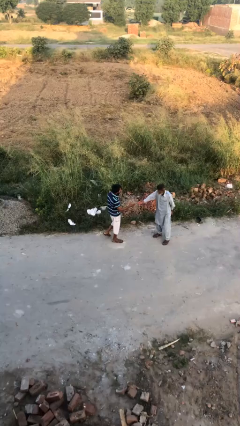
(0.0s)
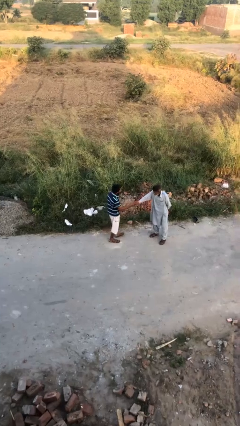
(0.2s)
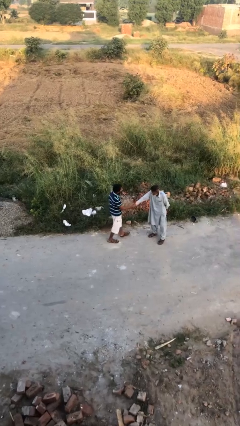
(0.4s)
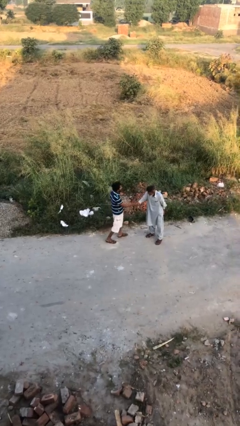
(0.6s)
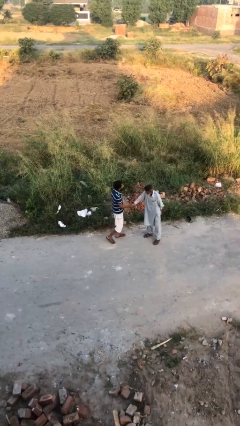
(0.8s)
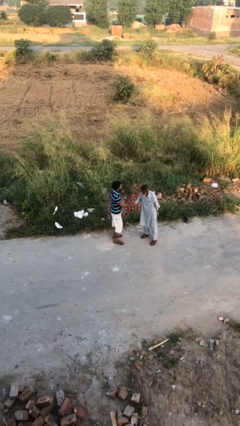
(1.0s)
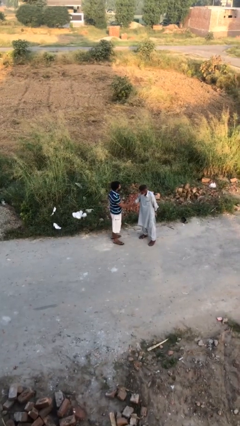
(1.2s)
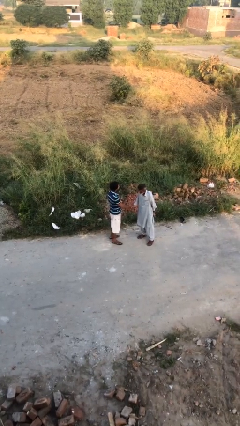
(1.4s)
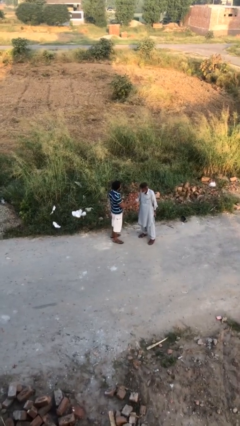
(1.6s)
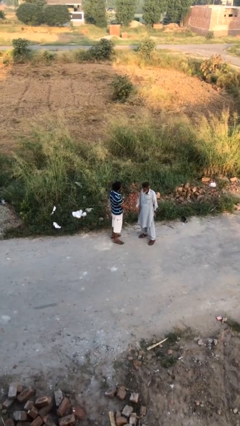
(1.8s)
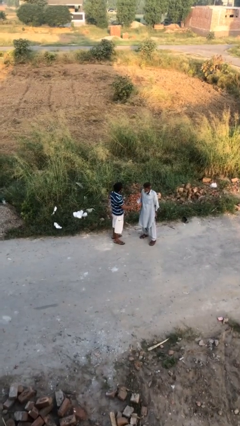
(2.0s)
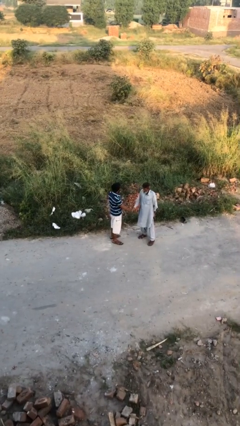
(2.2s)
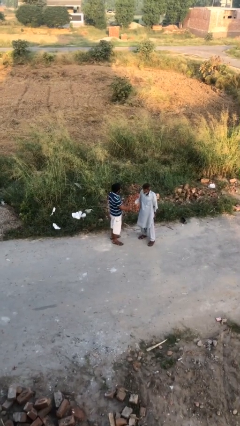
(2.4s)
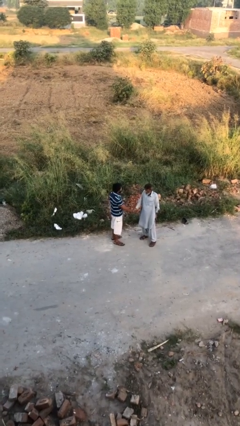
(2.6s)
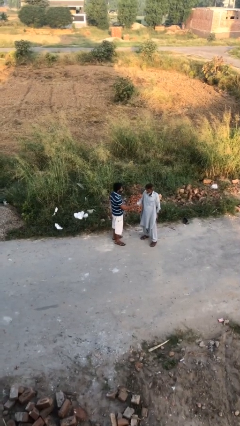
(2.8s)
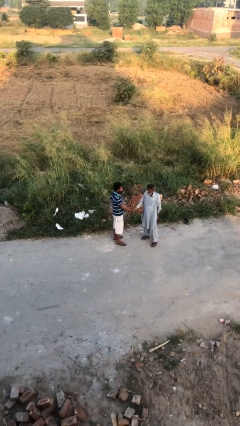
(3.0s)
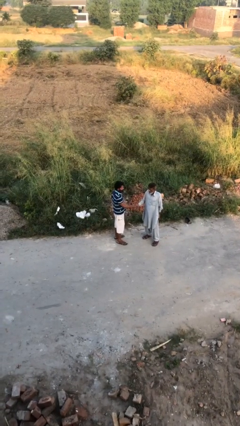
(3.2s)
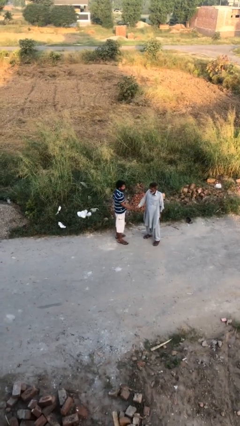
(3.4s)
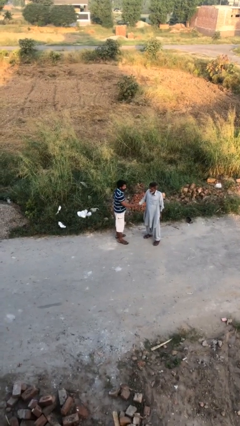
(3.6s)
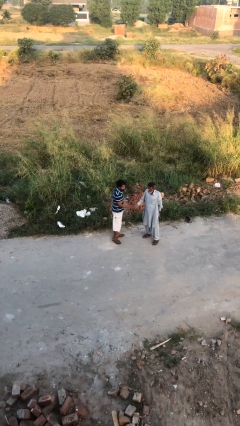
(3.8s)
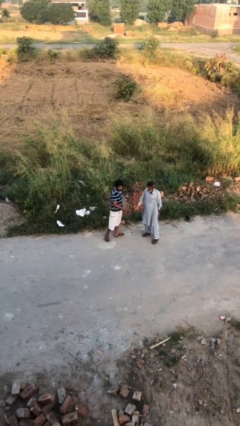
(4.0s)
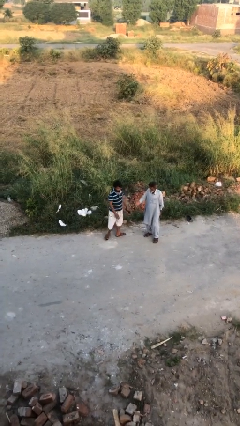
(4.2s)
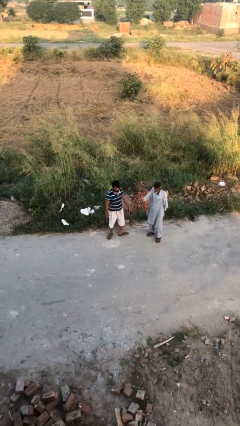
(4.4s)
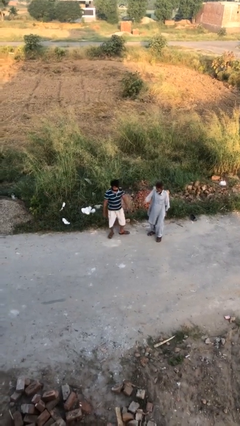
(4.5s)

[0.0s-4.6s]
person shakes hand

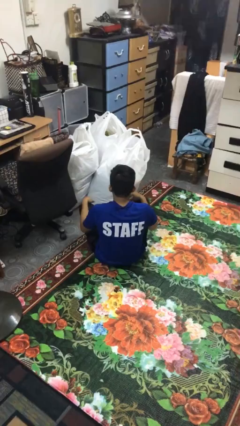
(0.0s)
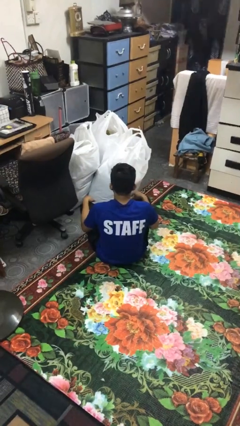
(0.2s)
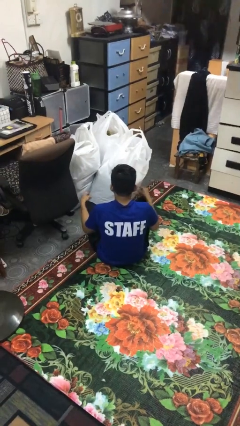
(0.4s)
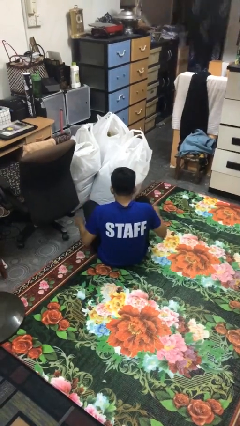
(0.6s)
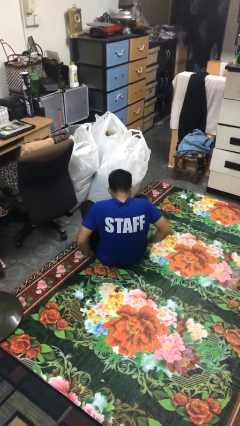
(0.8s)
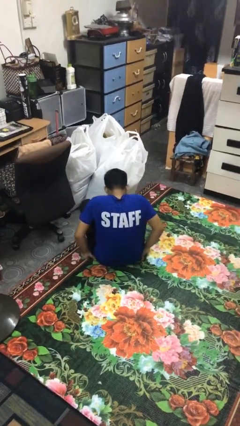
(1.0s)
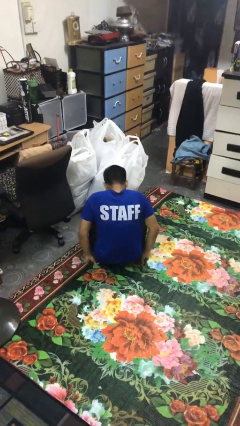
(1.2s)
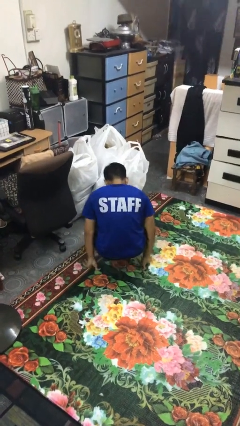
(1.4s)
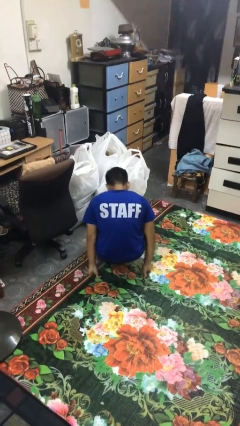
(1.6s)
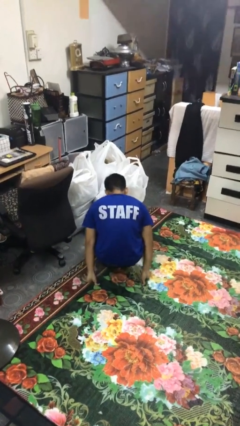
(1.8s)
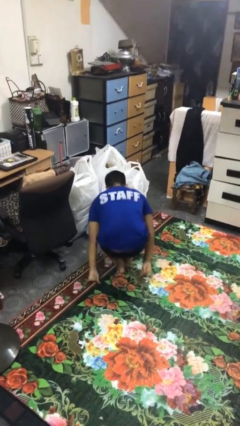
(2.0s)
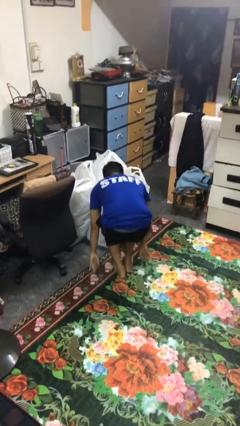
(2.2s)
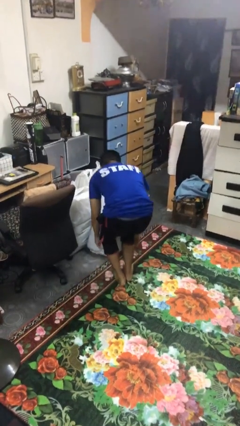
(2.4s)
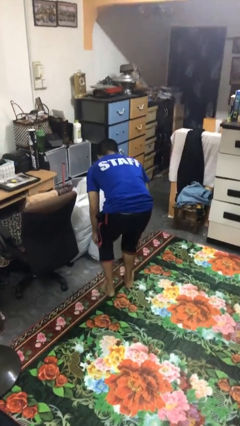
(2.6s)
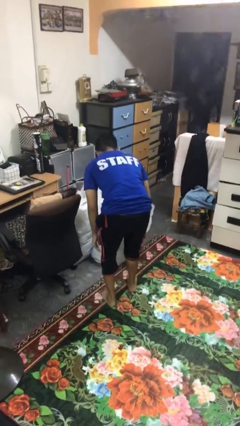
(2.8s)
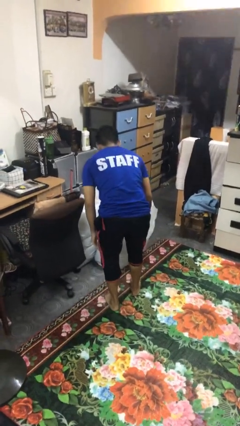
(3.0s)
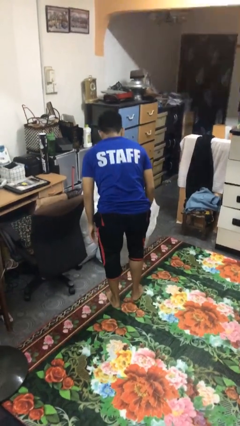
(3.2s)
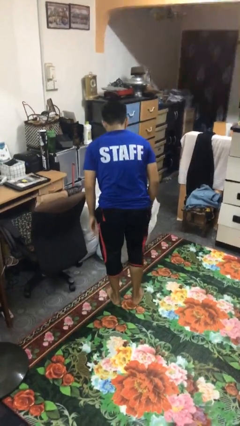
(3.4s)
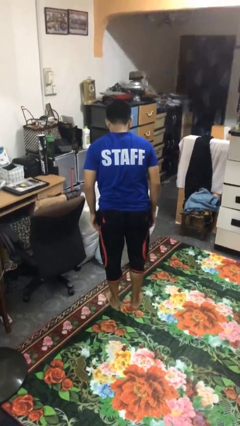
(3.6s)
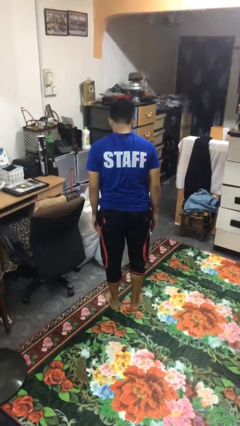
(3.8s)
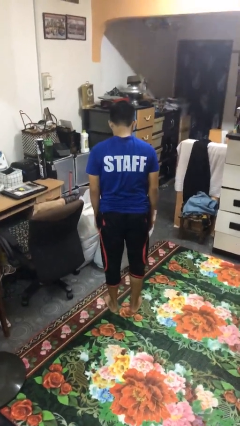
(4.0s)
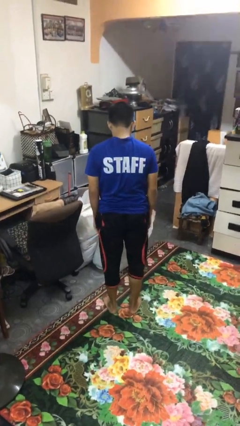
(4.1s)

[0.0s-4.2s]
person stands up from floor

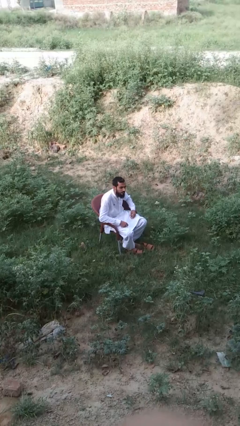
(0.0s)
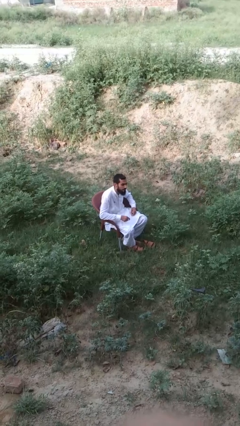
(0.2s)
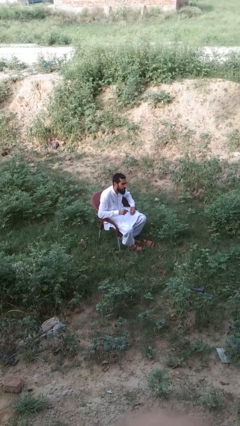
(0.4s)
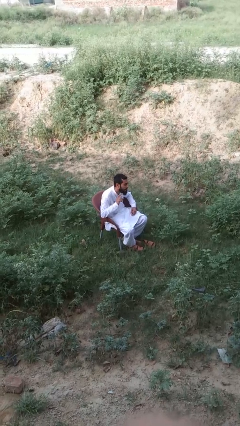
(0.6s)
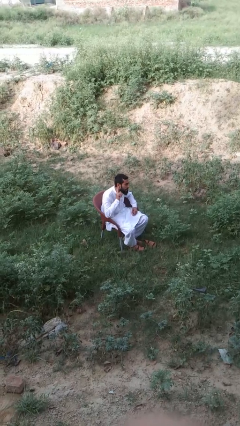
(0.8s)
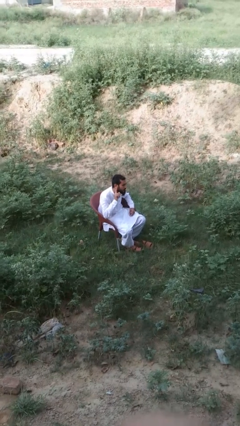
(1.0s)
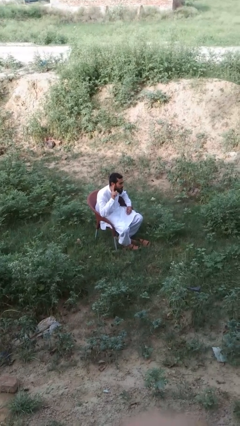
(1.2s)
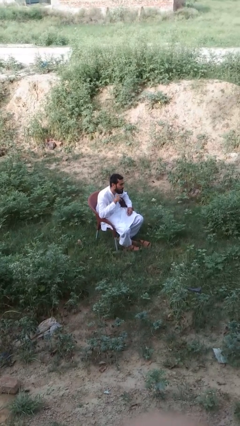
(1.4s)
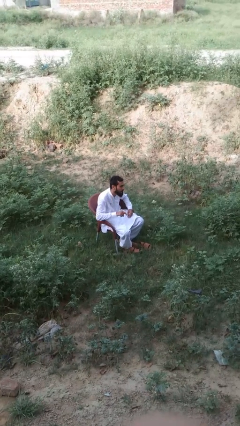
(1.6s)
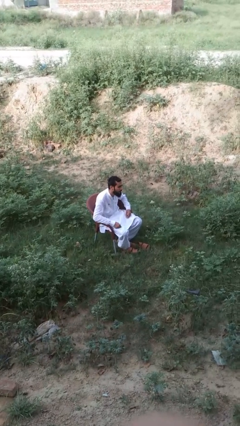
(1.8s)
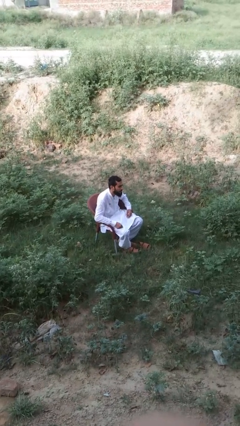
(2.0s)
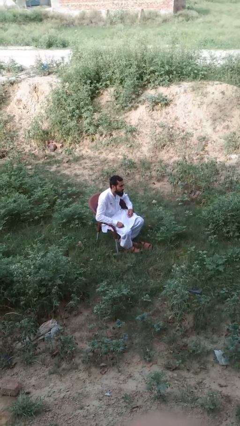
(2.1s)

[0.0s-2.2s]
person touches earlobe

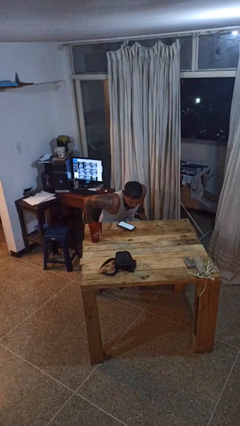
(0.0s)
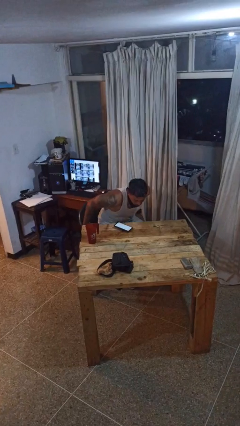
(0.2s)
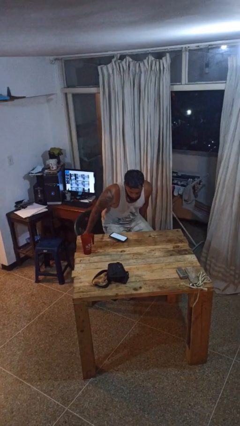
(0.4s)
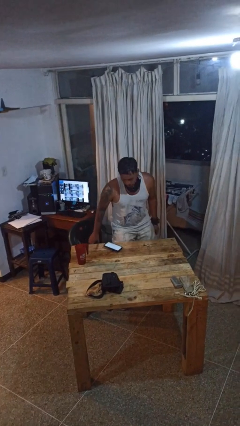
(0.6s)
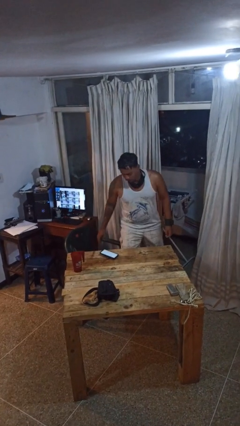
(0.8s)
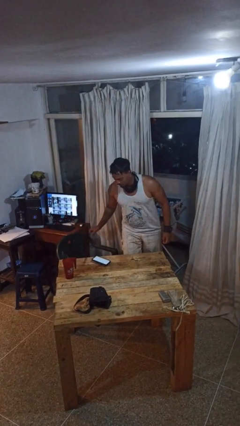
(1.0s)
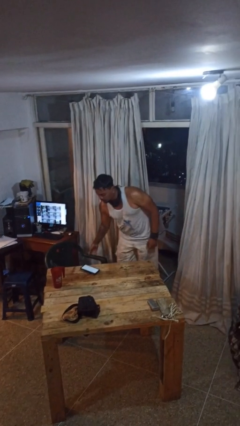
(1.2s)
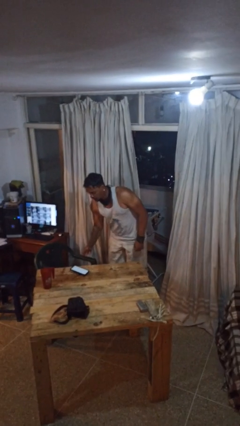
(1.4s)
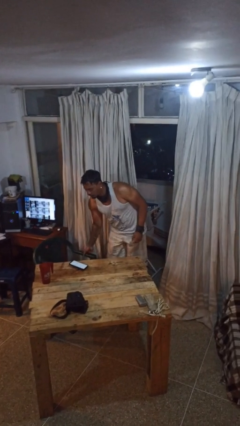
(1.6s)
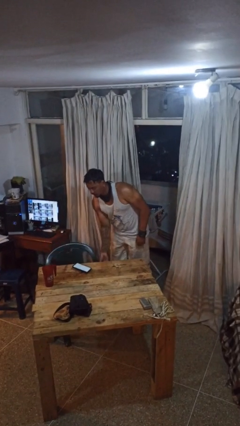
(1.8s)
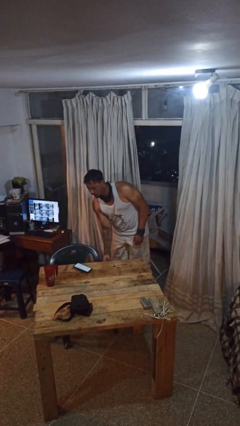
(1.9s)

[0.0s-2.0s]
person stands up

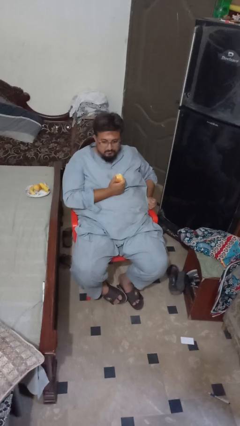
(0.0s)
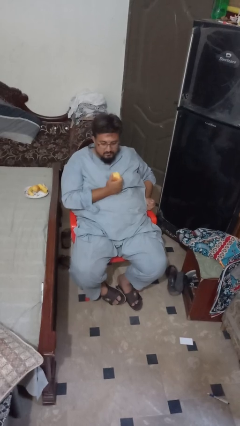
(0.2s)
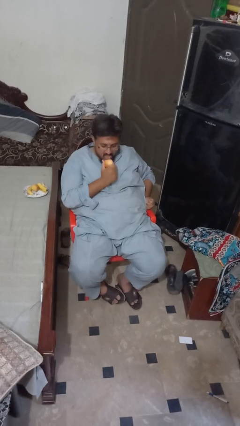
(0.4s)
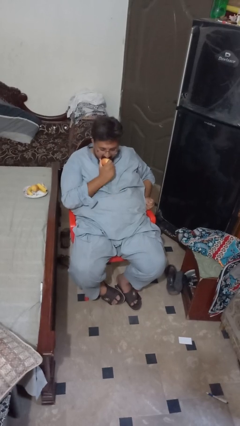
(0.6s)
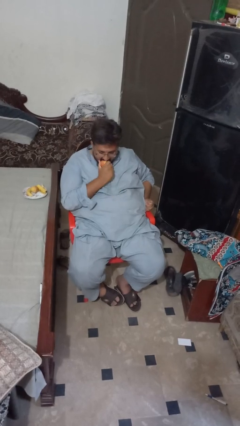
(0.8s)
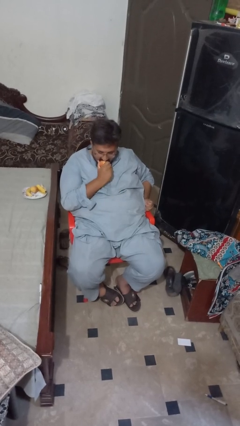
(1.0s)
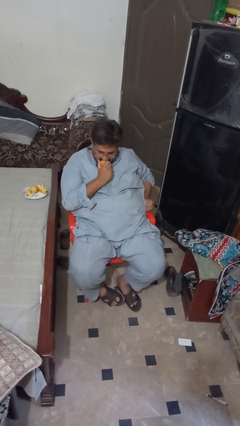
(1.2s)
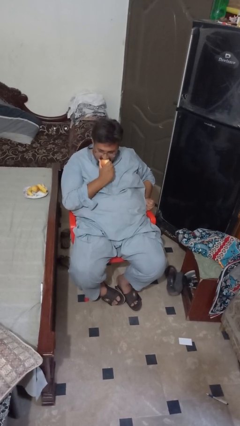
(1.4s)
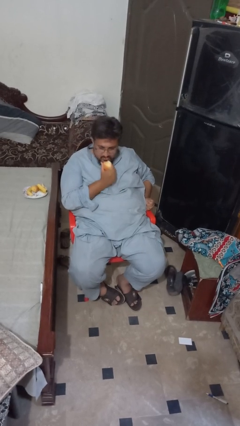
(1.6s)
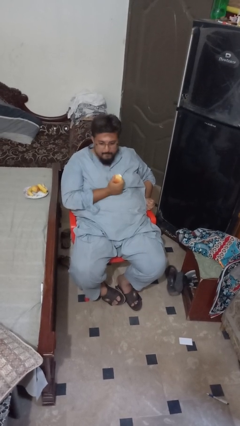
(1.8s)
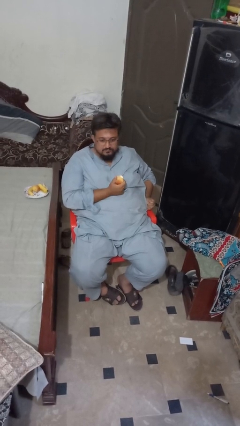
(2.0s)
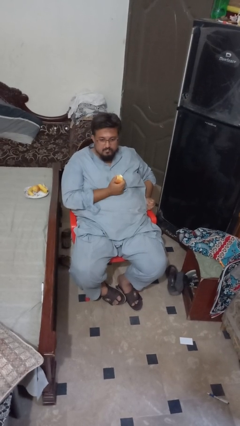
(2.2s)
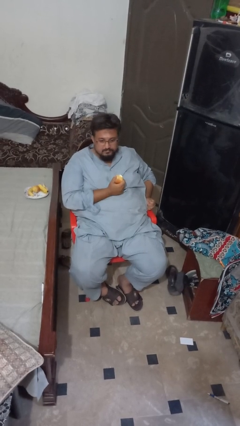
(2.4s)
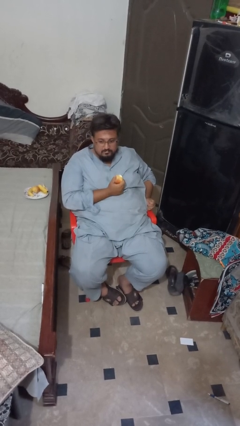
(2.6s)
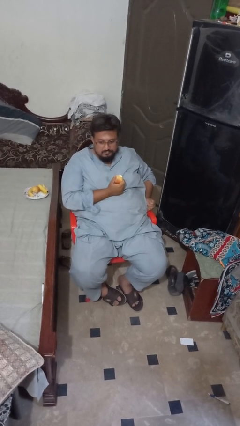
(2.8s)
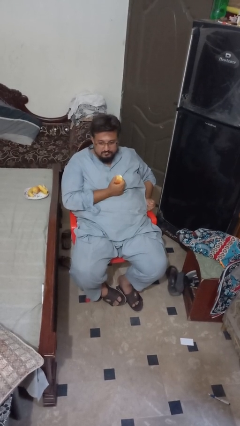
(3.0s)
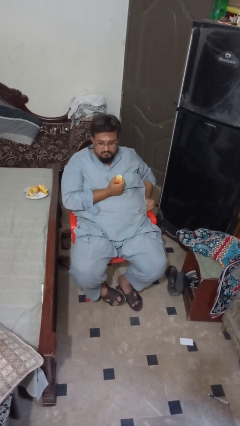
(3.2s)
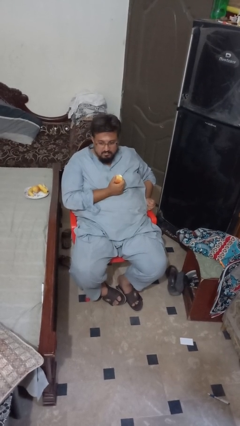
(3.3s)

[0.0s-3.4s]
person eats apple

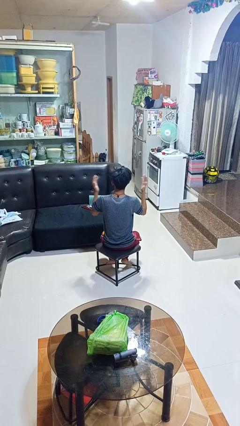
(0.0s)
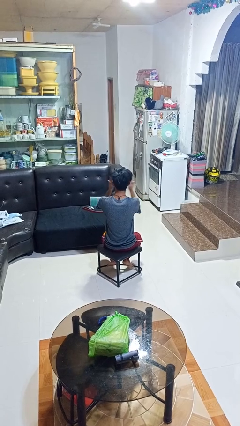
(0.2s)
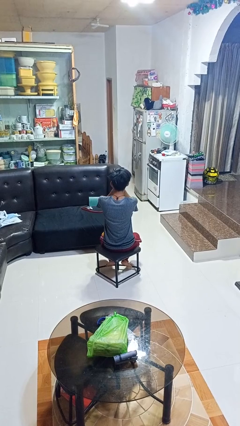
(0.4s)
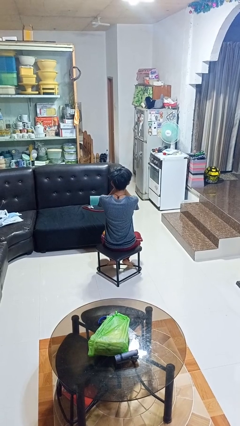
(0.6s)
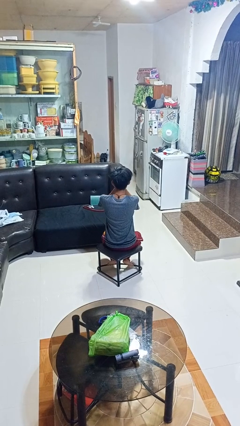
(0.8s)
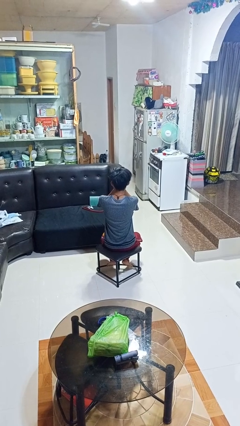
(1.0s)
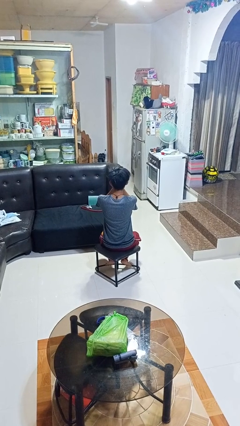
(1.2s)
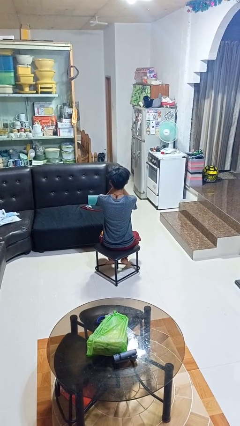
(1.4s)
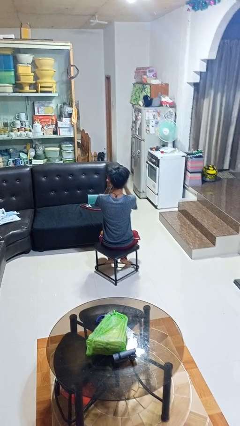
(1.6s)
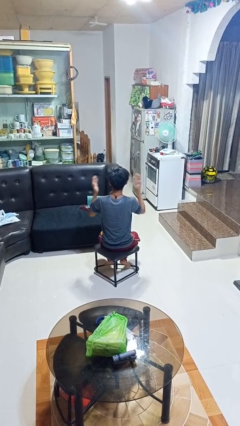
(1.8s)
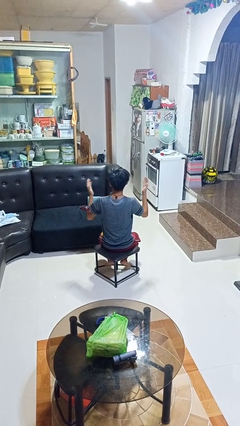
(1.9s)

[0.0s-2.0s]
person covers face with hands
